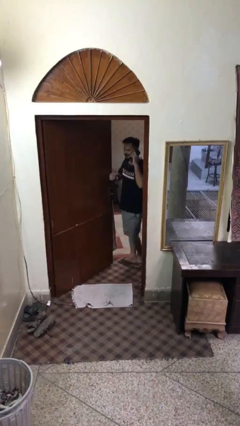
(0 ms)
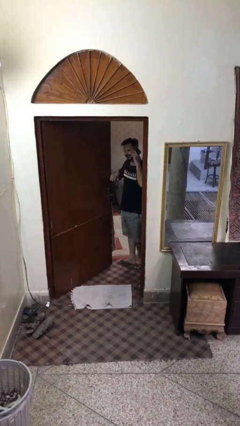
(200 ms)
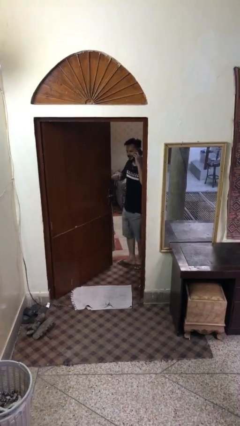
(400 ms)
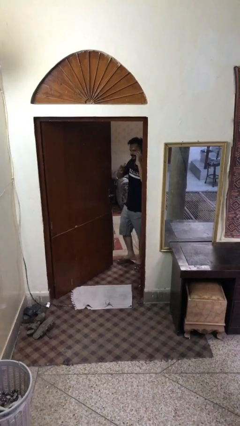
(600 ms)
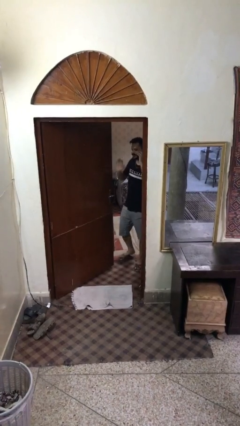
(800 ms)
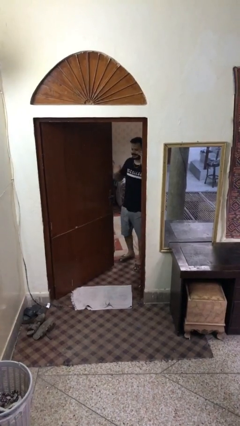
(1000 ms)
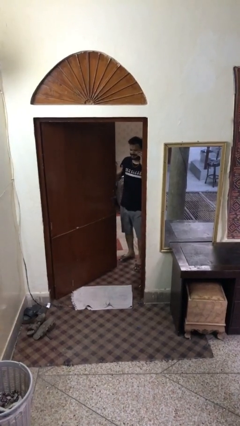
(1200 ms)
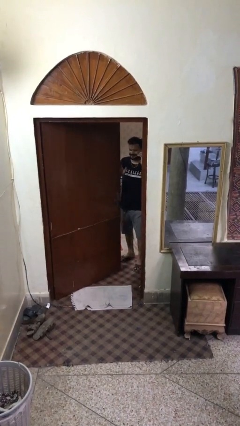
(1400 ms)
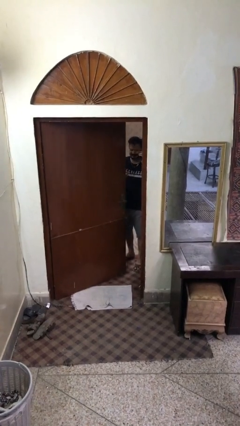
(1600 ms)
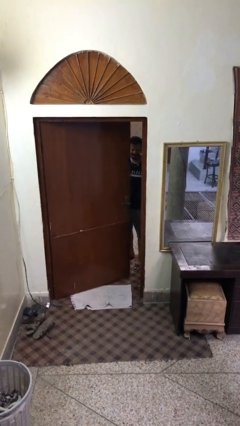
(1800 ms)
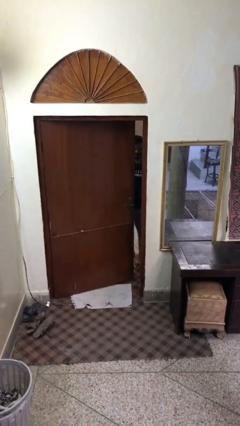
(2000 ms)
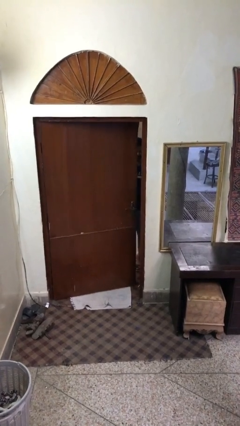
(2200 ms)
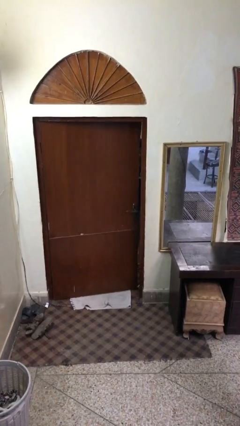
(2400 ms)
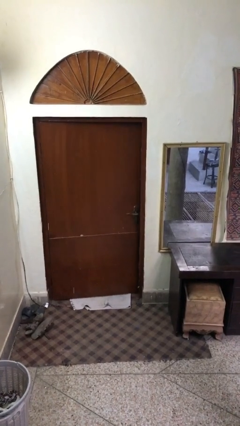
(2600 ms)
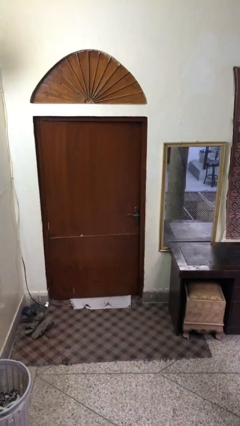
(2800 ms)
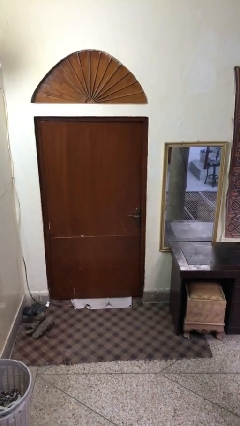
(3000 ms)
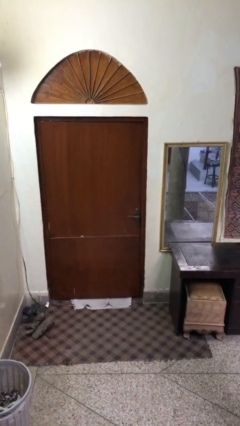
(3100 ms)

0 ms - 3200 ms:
person closes facility door

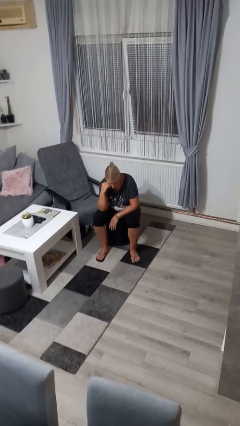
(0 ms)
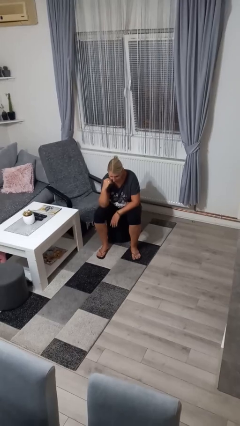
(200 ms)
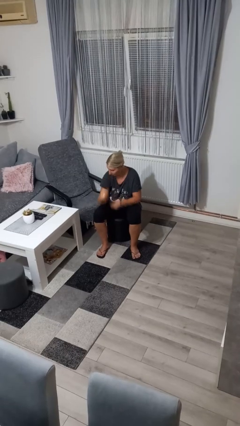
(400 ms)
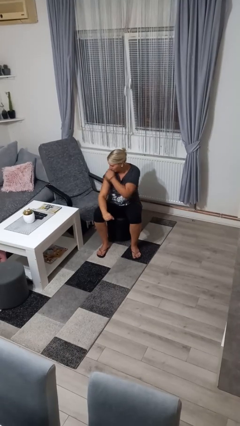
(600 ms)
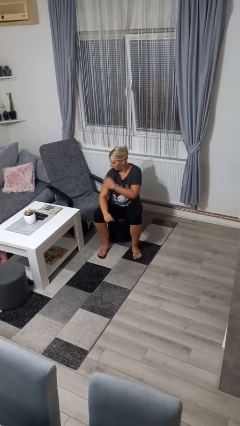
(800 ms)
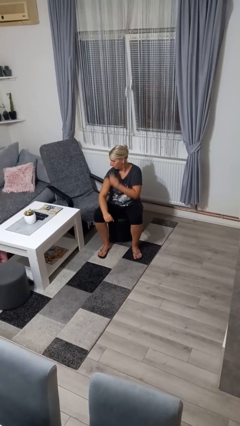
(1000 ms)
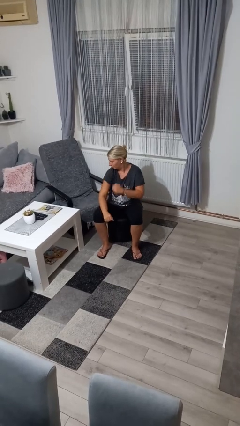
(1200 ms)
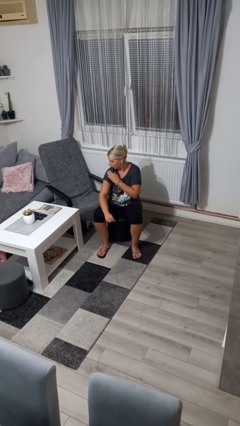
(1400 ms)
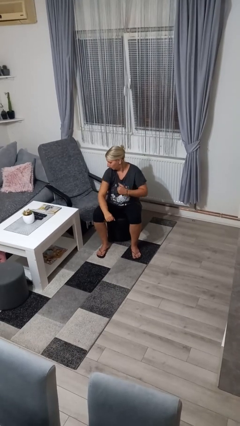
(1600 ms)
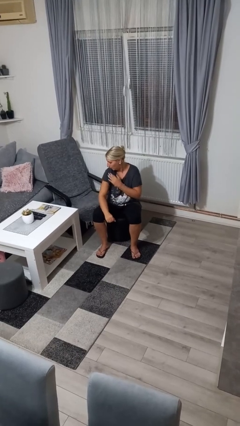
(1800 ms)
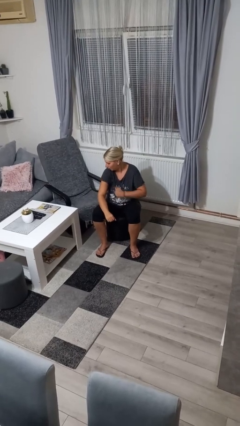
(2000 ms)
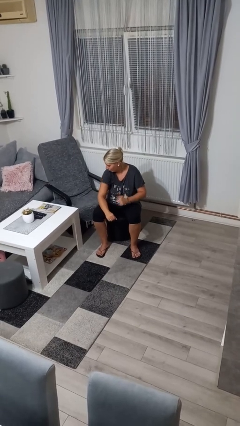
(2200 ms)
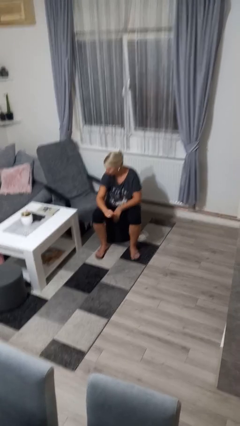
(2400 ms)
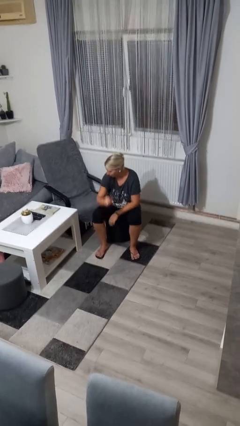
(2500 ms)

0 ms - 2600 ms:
person swats bug

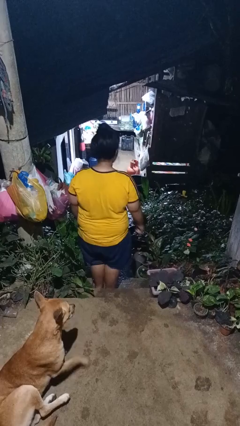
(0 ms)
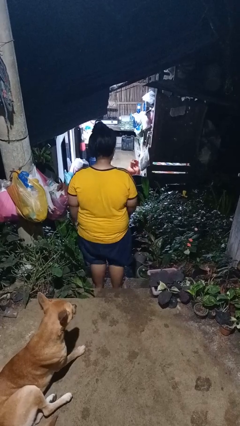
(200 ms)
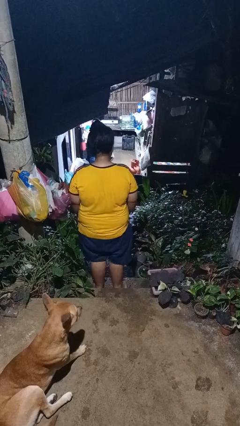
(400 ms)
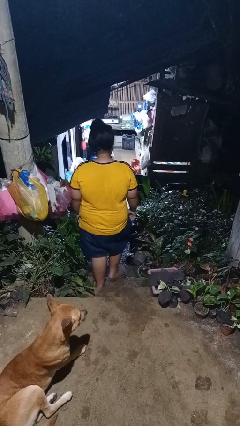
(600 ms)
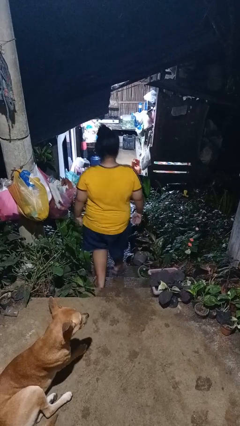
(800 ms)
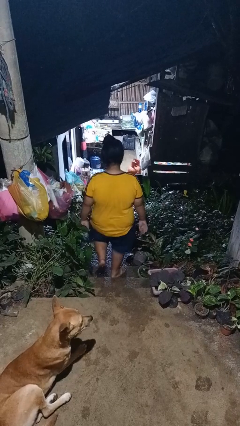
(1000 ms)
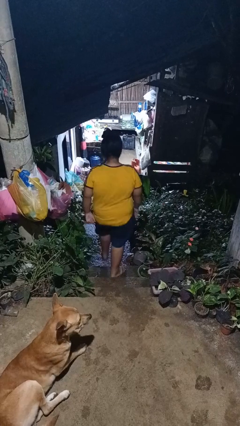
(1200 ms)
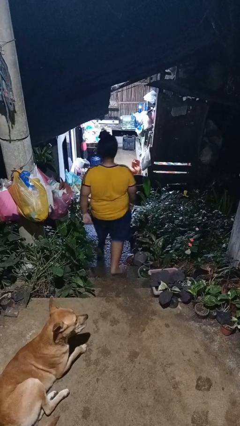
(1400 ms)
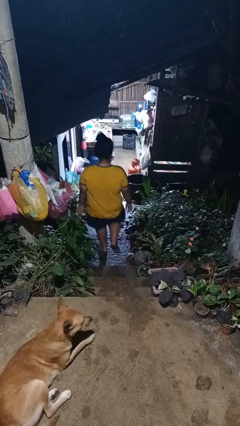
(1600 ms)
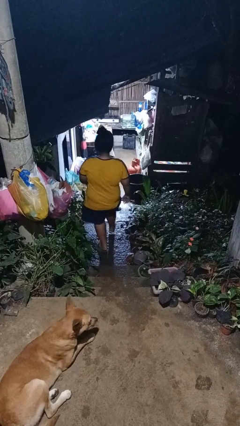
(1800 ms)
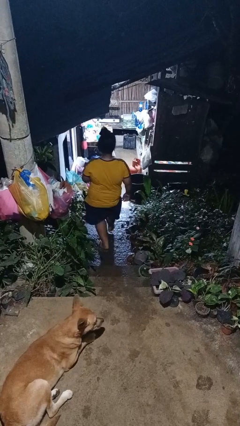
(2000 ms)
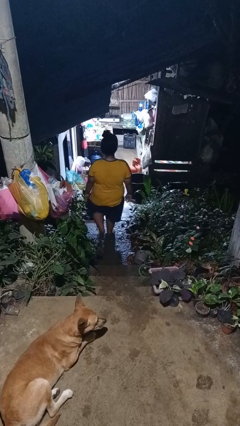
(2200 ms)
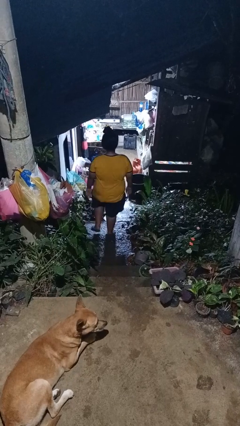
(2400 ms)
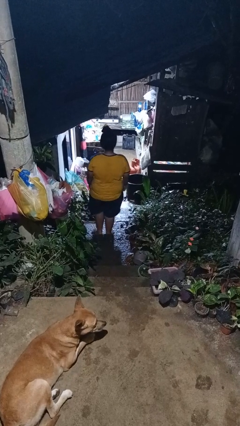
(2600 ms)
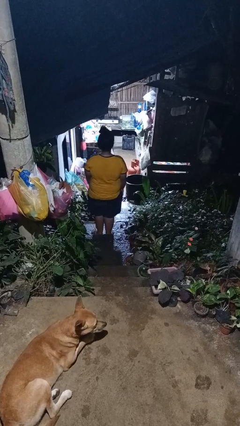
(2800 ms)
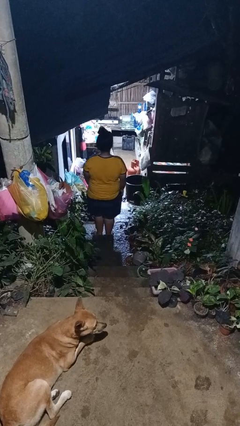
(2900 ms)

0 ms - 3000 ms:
person climbs down stairs

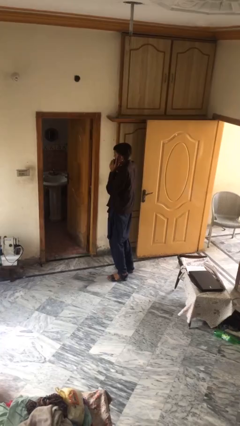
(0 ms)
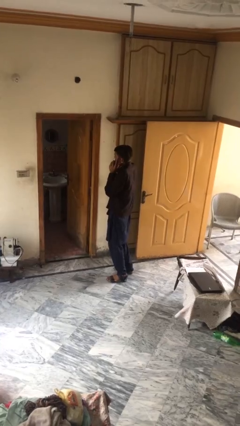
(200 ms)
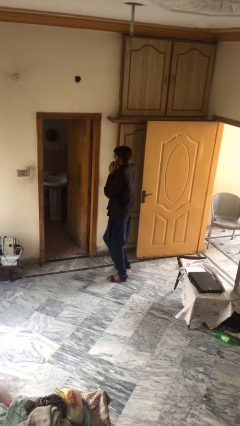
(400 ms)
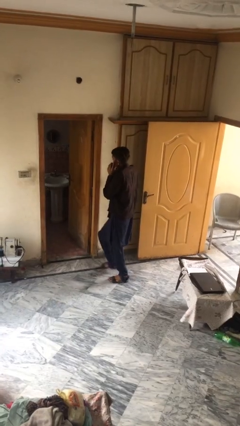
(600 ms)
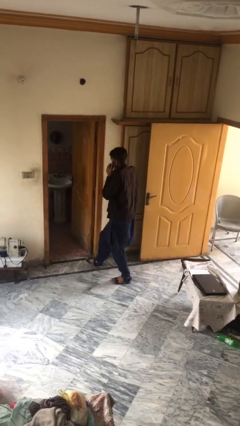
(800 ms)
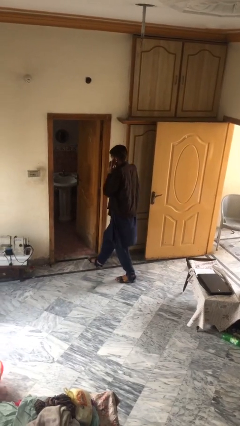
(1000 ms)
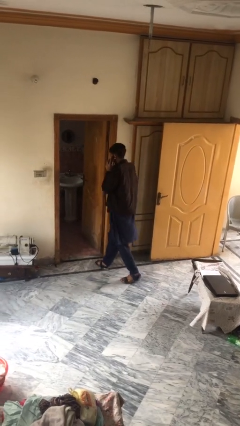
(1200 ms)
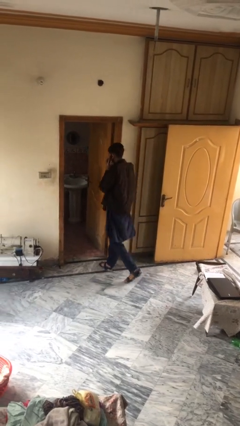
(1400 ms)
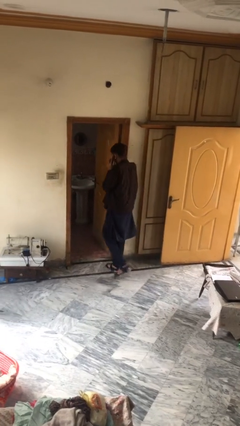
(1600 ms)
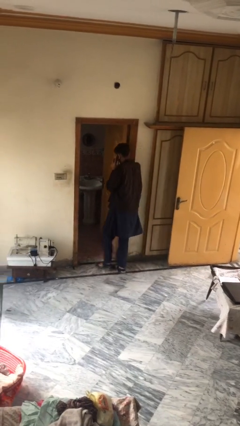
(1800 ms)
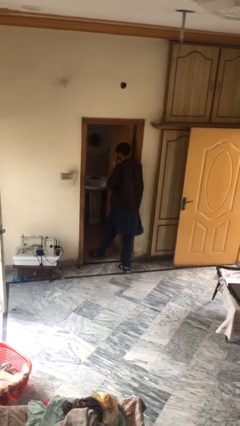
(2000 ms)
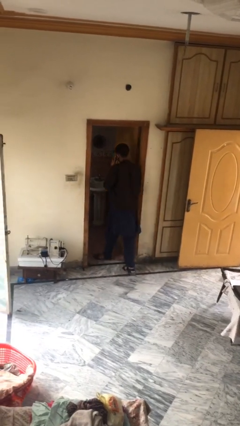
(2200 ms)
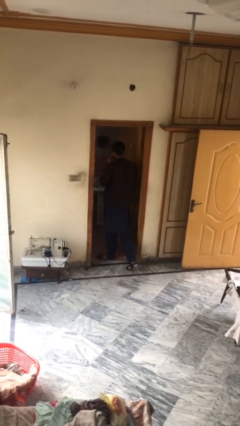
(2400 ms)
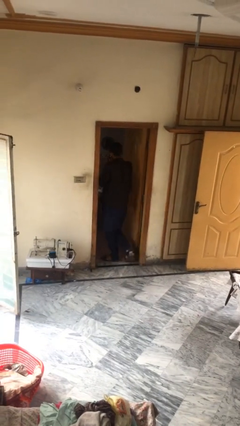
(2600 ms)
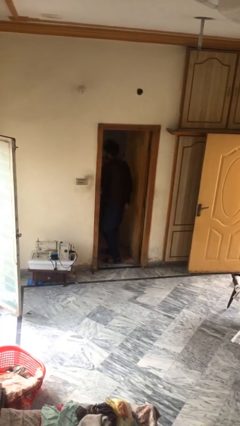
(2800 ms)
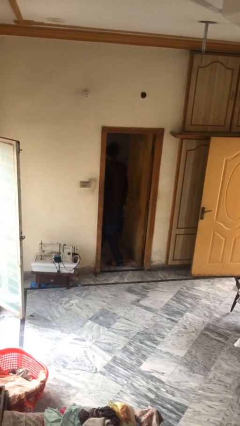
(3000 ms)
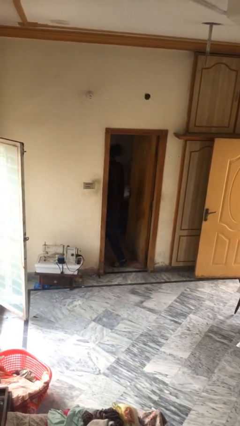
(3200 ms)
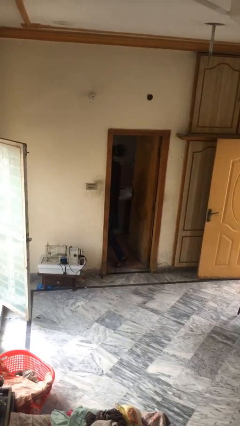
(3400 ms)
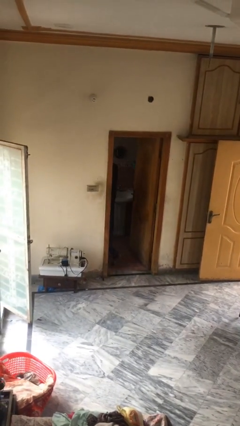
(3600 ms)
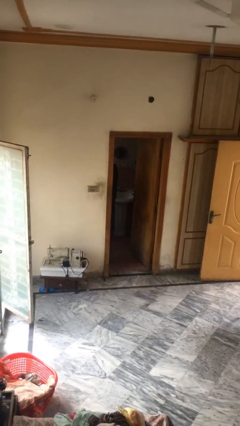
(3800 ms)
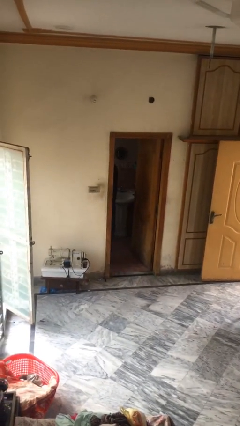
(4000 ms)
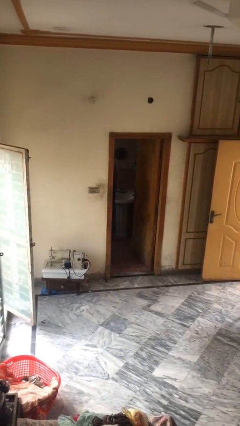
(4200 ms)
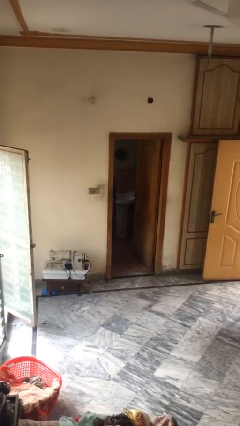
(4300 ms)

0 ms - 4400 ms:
person exits scene through structure

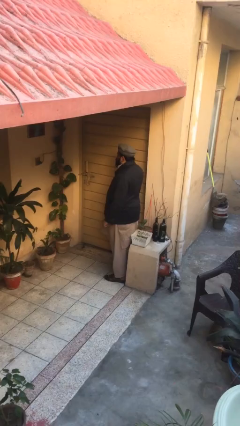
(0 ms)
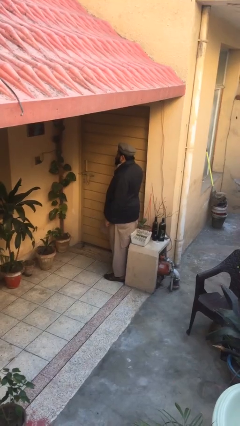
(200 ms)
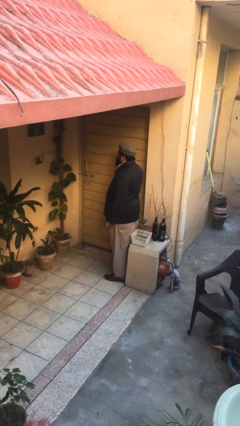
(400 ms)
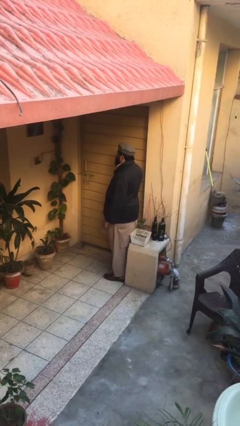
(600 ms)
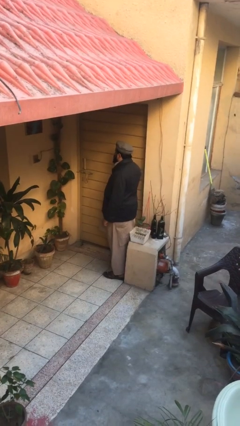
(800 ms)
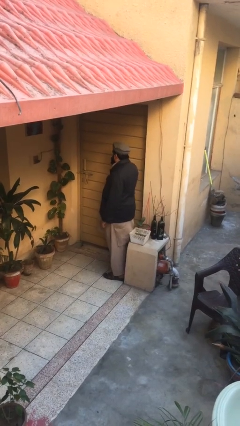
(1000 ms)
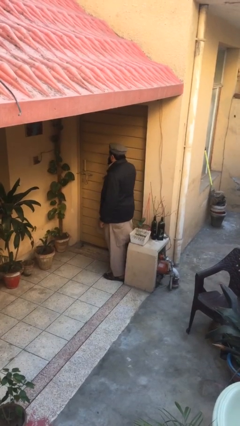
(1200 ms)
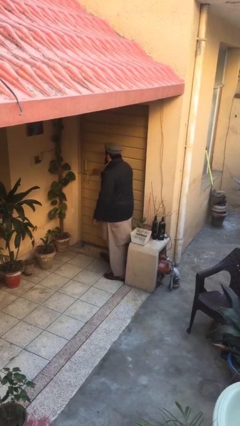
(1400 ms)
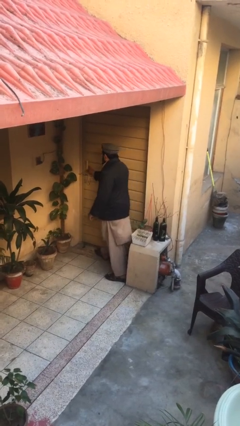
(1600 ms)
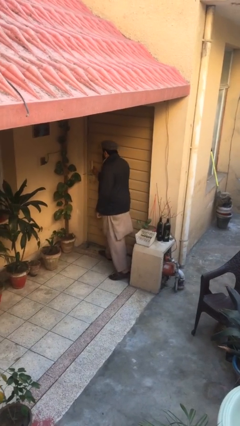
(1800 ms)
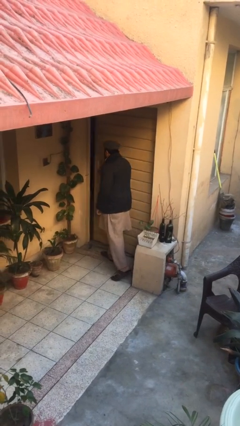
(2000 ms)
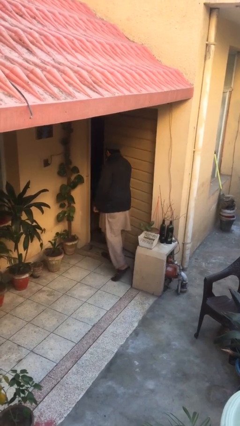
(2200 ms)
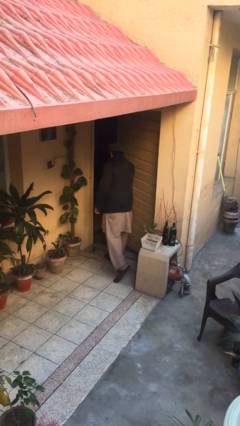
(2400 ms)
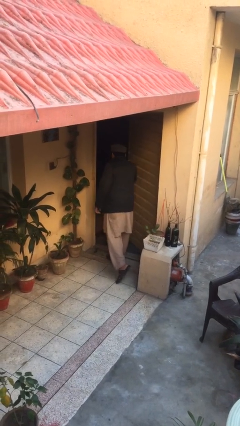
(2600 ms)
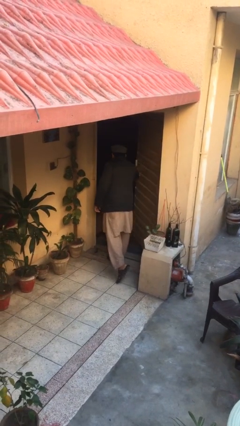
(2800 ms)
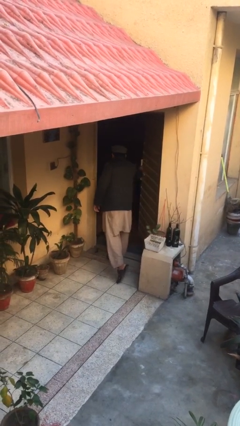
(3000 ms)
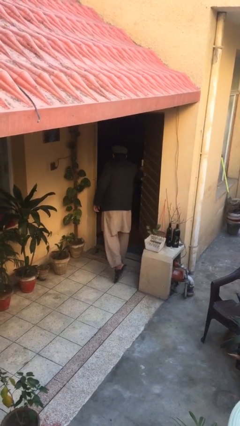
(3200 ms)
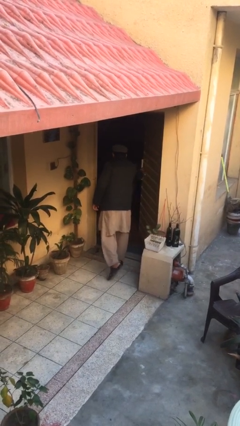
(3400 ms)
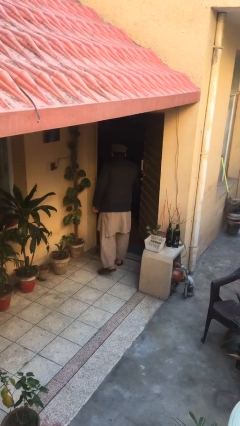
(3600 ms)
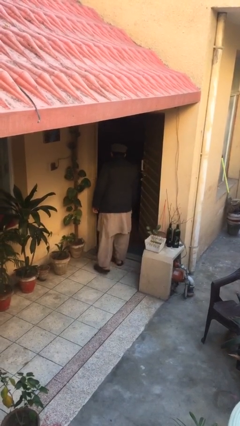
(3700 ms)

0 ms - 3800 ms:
person opens facility door

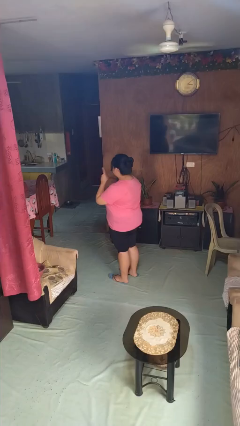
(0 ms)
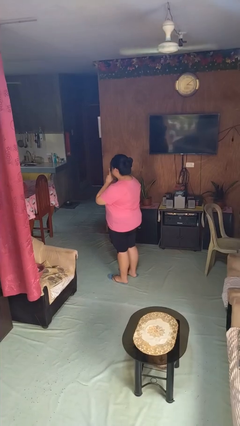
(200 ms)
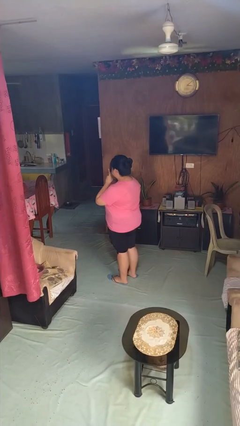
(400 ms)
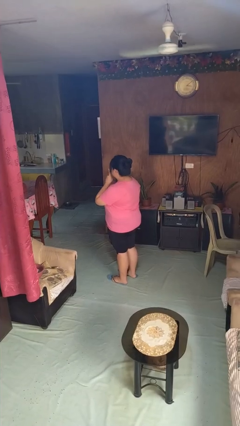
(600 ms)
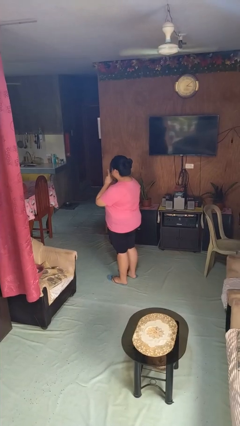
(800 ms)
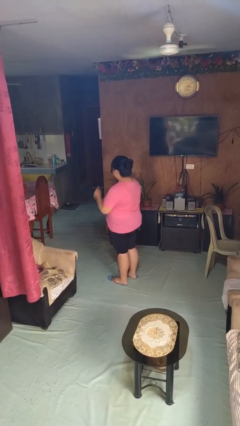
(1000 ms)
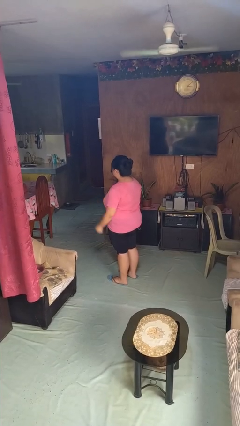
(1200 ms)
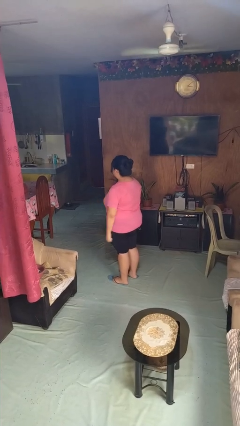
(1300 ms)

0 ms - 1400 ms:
person gestures be quiet
